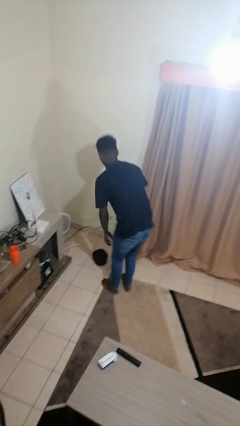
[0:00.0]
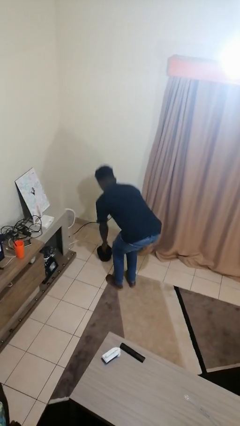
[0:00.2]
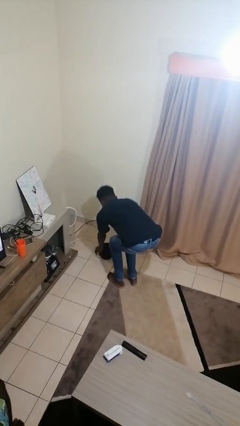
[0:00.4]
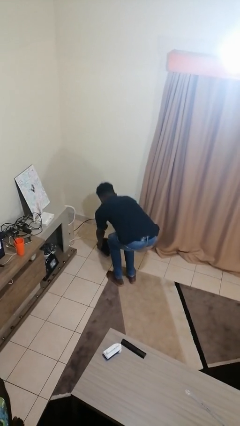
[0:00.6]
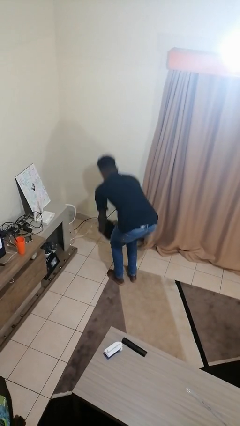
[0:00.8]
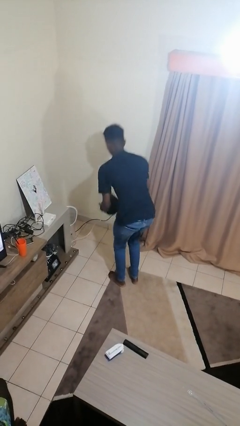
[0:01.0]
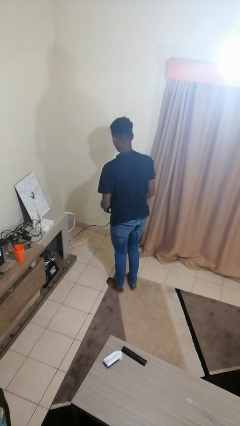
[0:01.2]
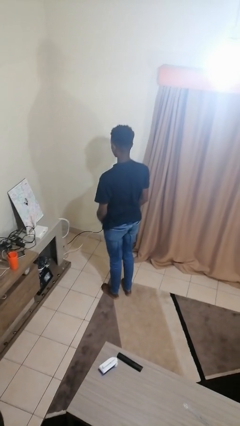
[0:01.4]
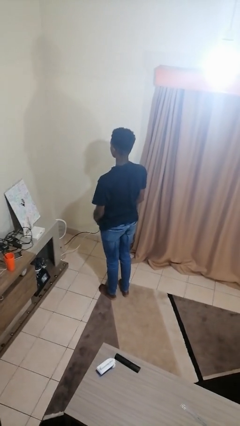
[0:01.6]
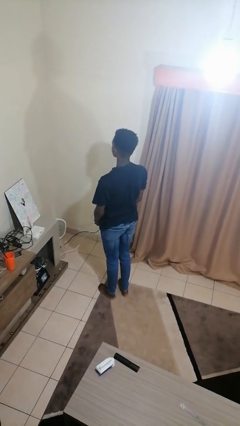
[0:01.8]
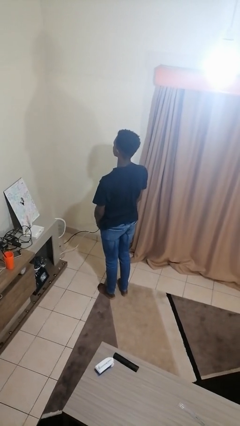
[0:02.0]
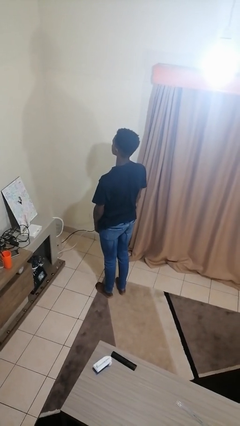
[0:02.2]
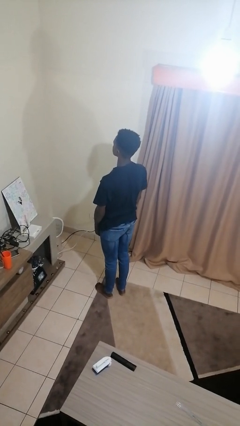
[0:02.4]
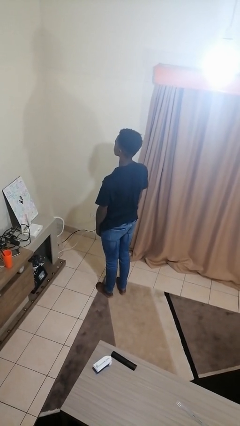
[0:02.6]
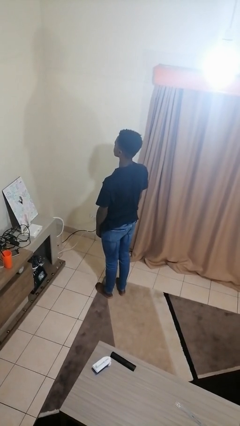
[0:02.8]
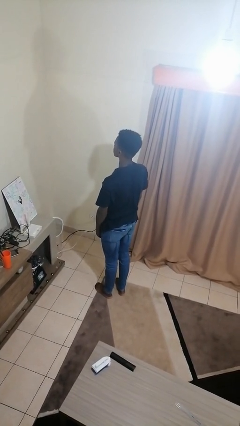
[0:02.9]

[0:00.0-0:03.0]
person picks up object from floor

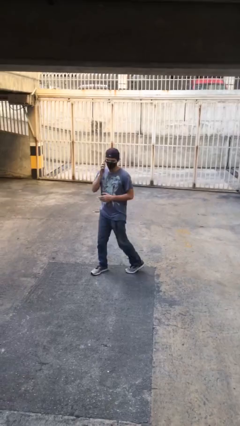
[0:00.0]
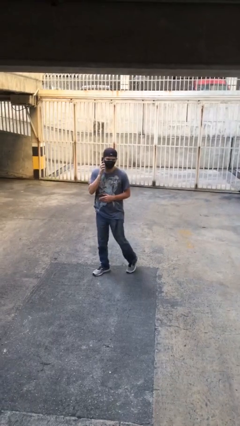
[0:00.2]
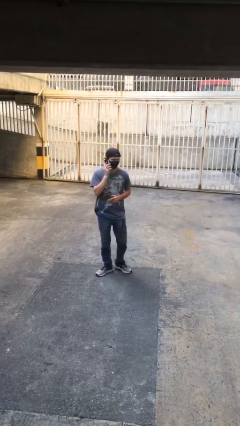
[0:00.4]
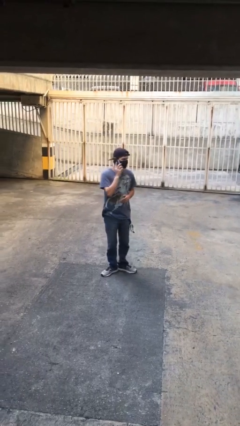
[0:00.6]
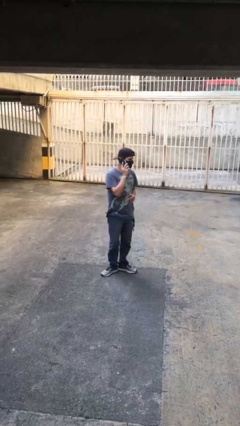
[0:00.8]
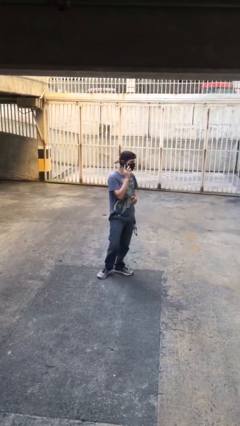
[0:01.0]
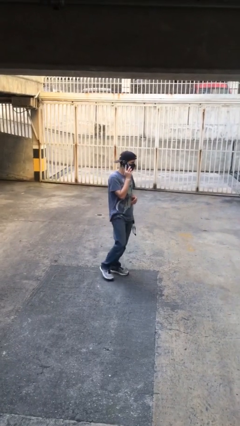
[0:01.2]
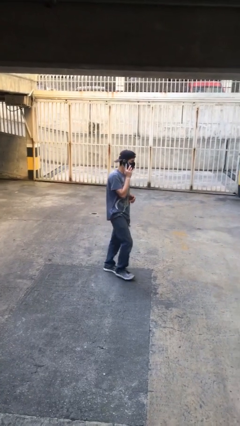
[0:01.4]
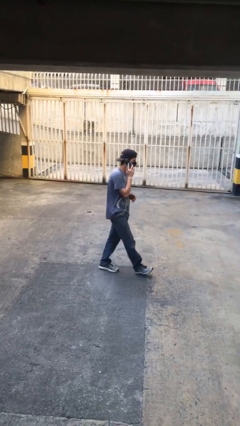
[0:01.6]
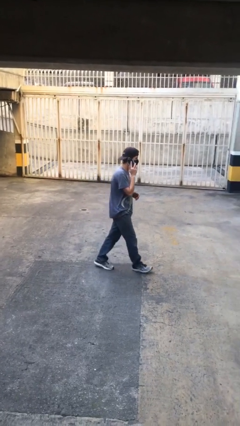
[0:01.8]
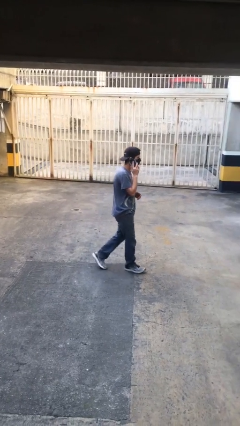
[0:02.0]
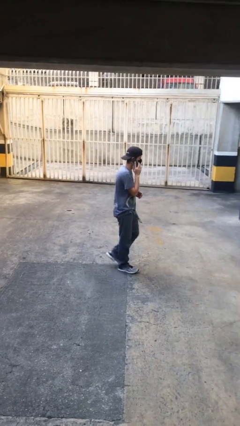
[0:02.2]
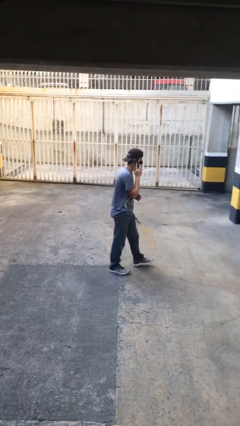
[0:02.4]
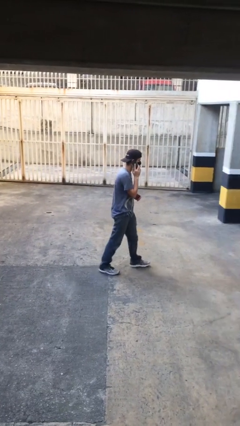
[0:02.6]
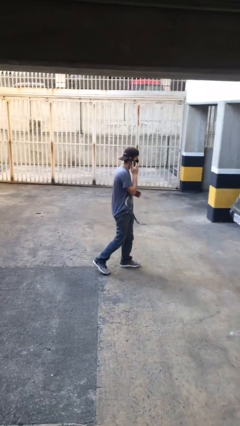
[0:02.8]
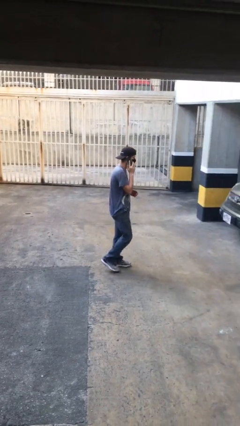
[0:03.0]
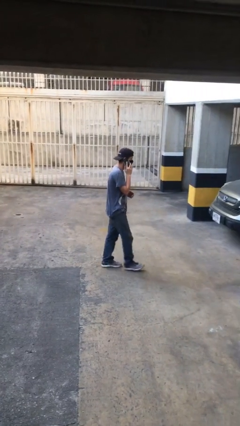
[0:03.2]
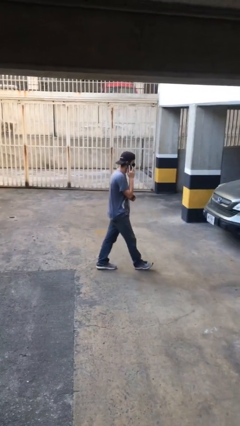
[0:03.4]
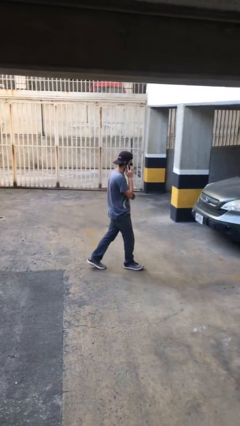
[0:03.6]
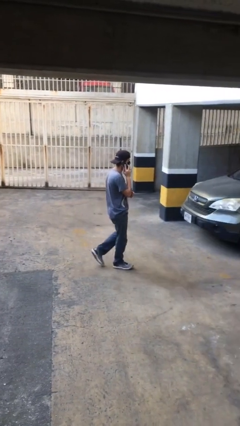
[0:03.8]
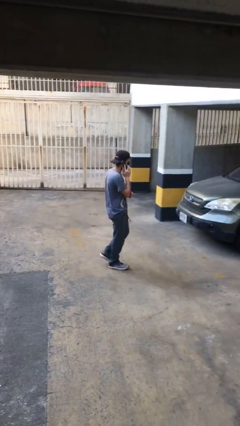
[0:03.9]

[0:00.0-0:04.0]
person talks on phone

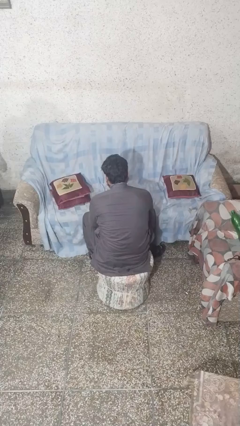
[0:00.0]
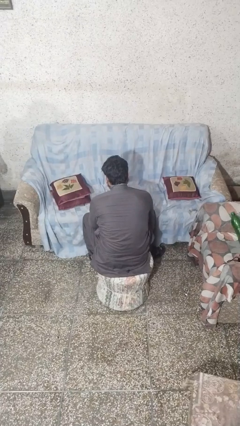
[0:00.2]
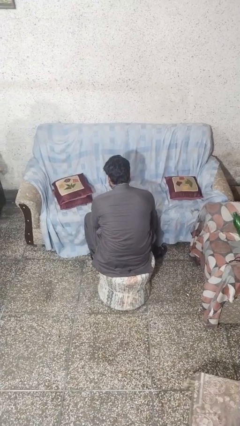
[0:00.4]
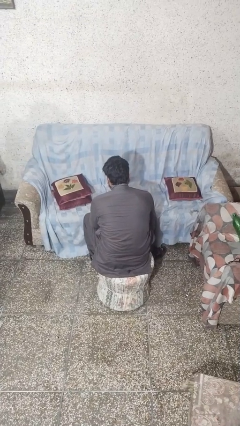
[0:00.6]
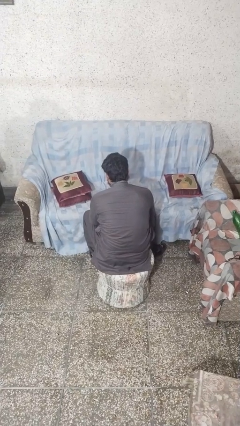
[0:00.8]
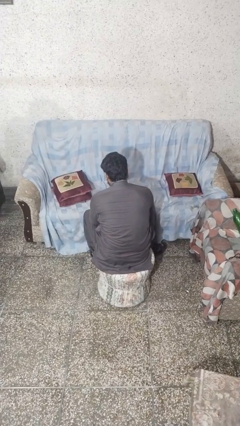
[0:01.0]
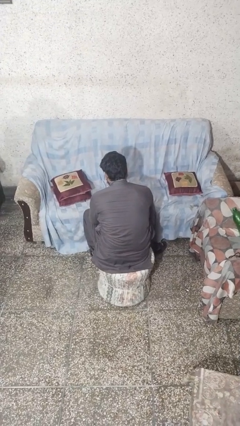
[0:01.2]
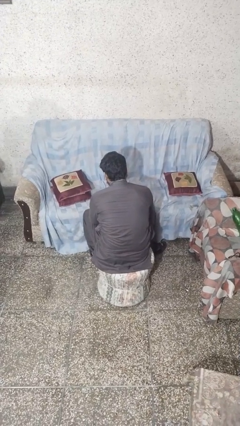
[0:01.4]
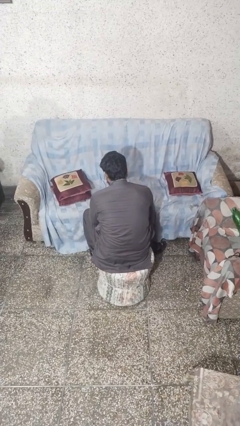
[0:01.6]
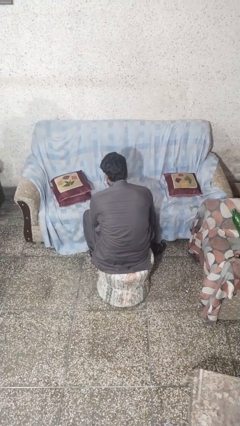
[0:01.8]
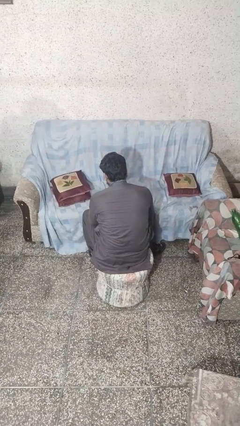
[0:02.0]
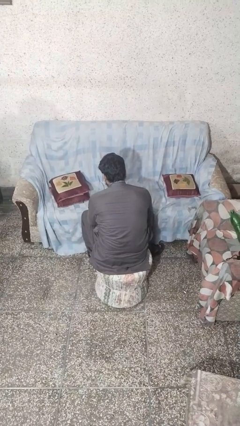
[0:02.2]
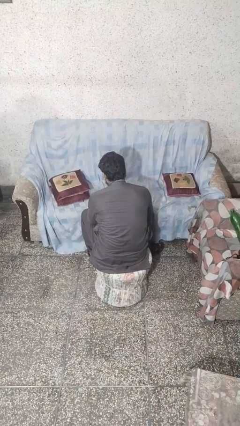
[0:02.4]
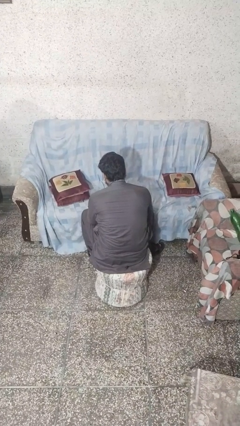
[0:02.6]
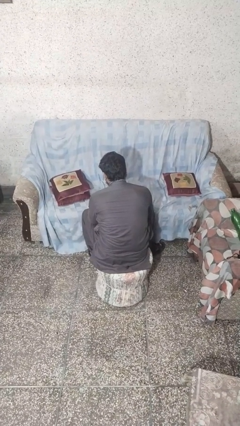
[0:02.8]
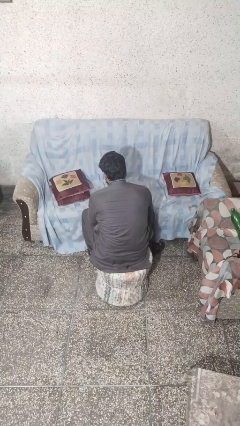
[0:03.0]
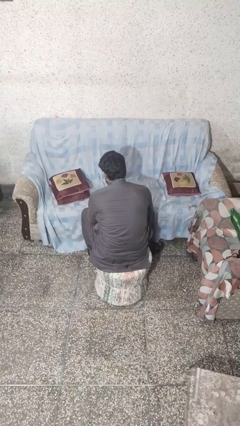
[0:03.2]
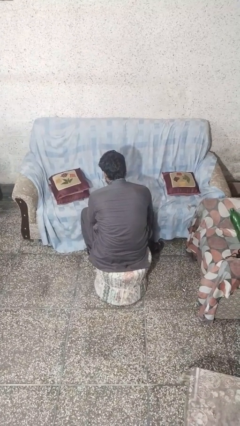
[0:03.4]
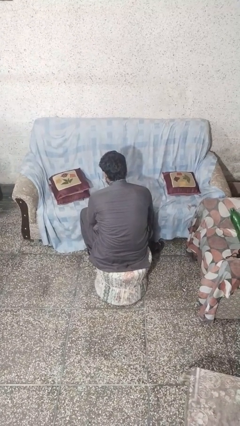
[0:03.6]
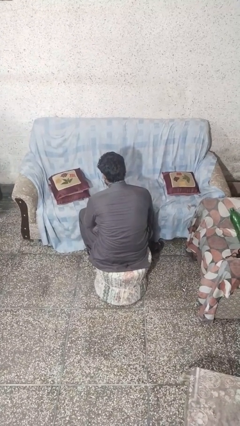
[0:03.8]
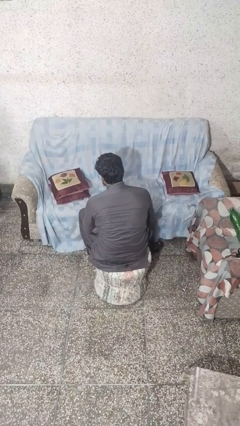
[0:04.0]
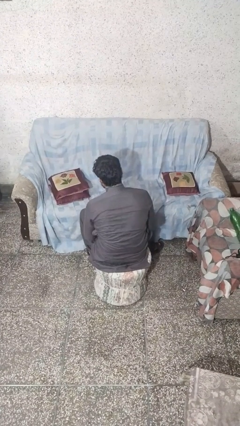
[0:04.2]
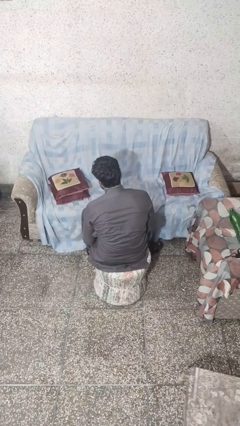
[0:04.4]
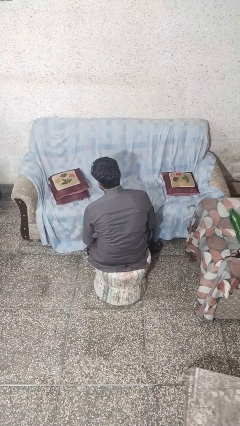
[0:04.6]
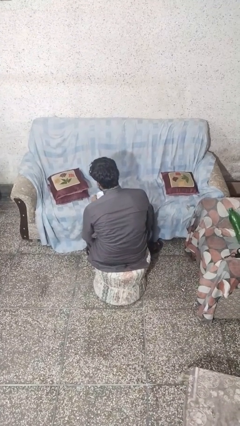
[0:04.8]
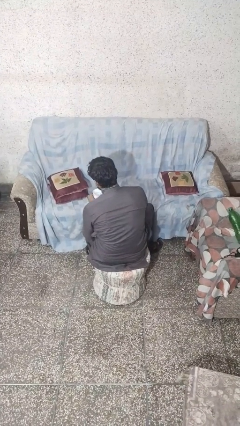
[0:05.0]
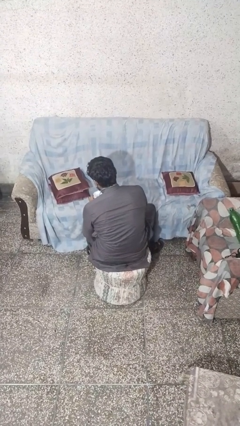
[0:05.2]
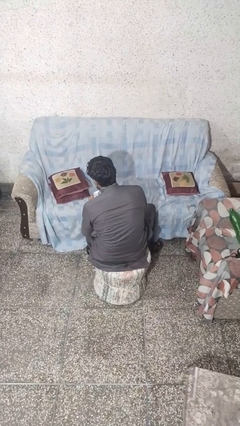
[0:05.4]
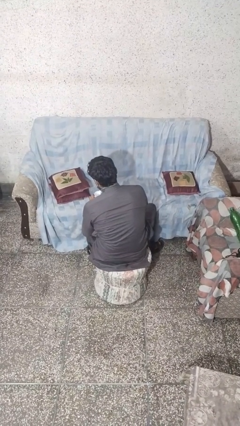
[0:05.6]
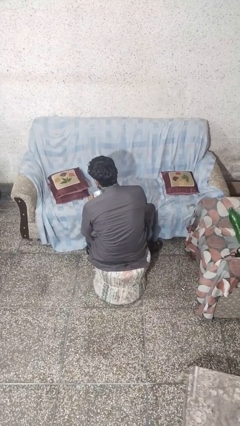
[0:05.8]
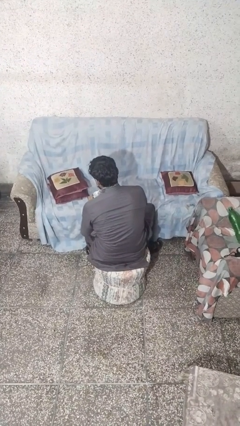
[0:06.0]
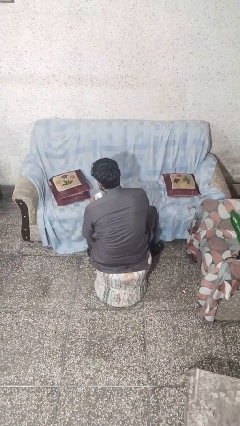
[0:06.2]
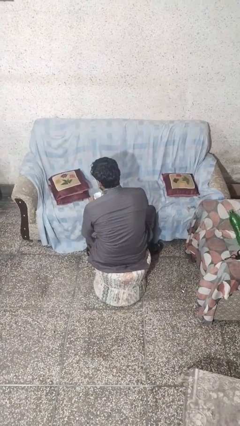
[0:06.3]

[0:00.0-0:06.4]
person stirs mug

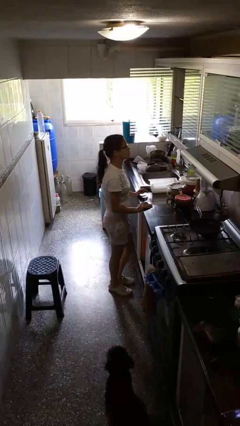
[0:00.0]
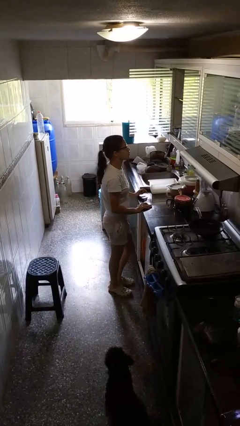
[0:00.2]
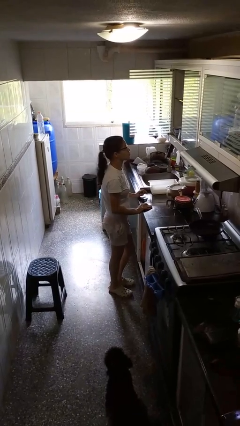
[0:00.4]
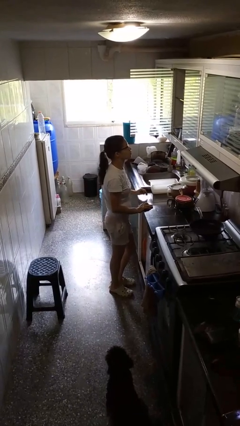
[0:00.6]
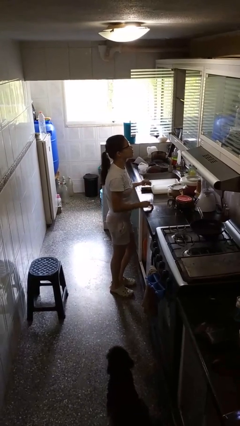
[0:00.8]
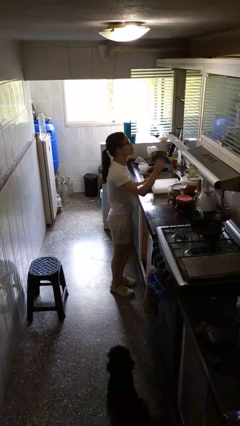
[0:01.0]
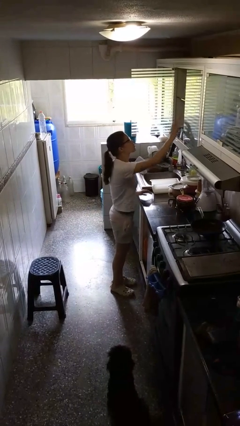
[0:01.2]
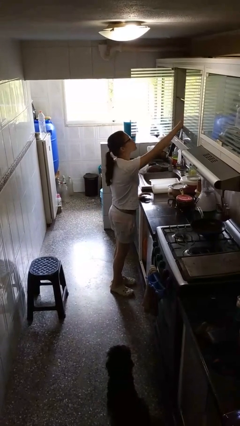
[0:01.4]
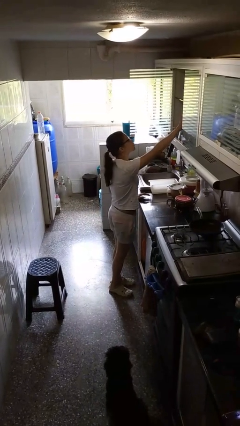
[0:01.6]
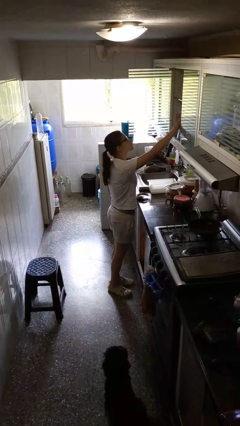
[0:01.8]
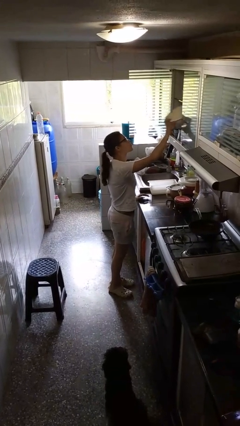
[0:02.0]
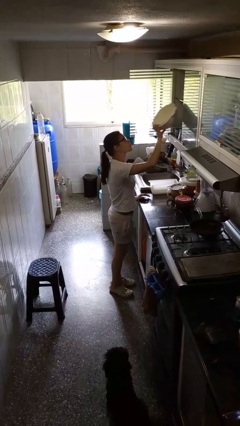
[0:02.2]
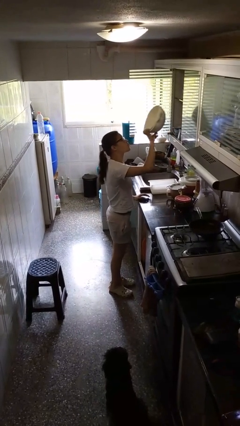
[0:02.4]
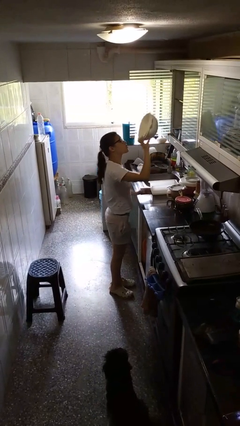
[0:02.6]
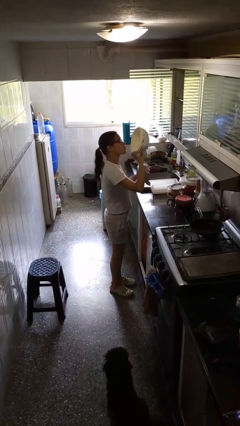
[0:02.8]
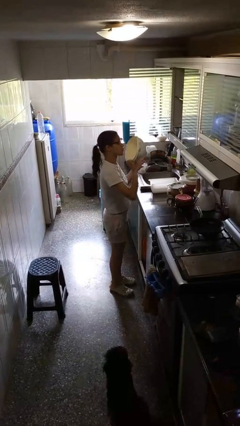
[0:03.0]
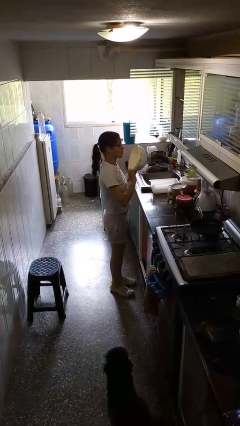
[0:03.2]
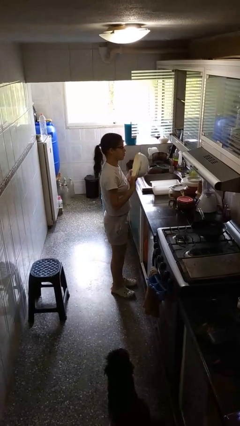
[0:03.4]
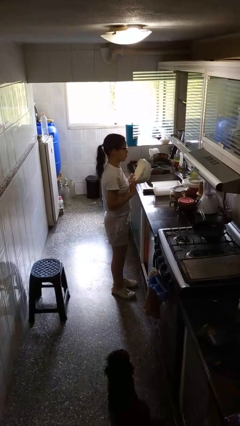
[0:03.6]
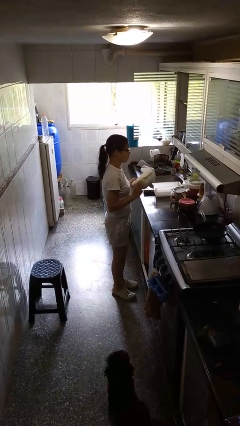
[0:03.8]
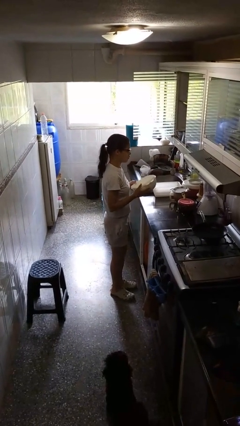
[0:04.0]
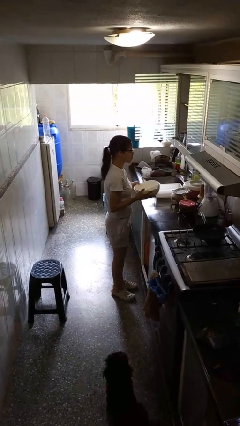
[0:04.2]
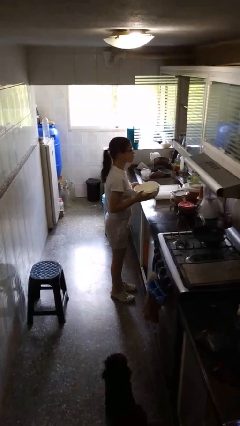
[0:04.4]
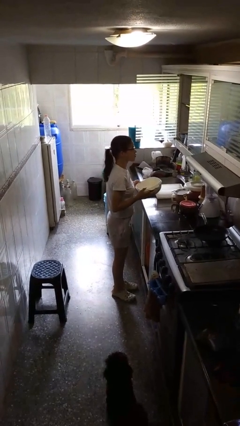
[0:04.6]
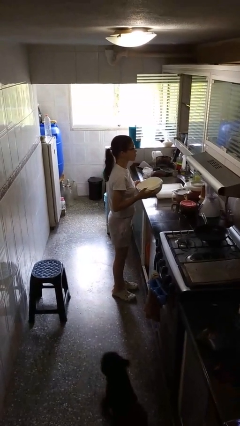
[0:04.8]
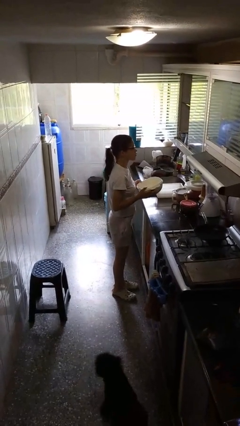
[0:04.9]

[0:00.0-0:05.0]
person picks up object from cabinet
